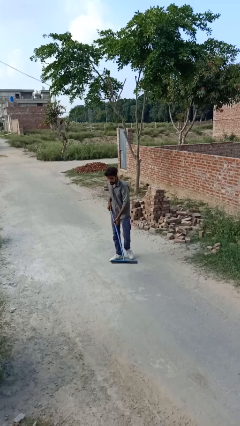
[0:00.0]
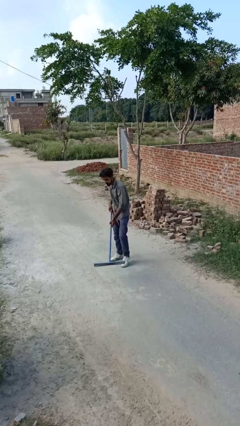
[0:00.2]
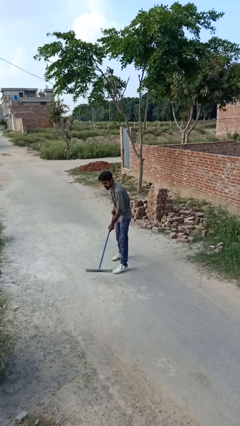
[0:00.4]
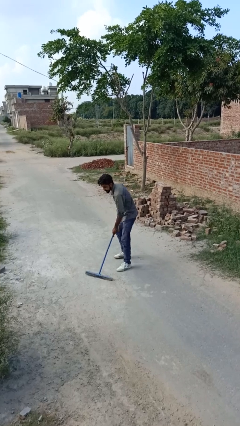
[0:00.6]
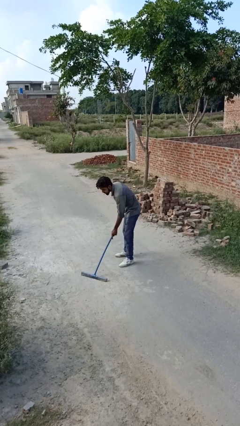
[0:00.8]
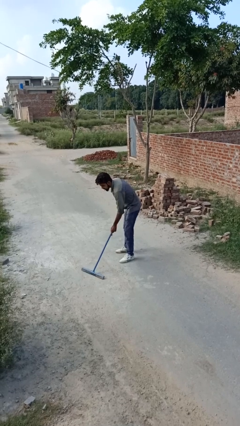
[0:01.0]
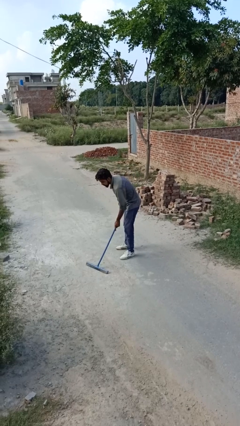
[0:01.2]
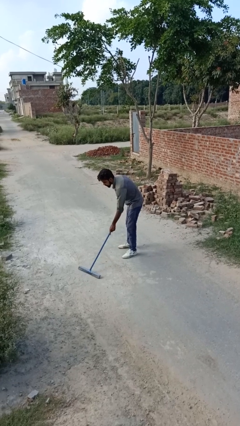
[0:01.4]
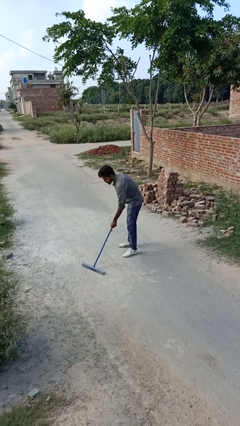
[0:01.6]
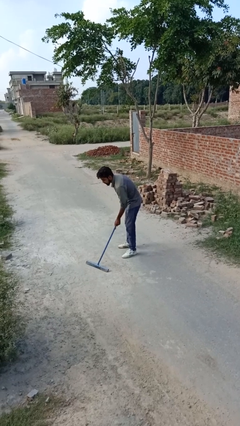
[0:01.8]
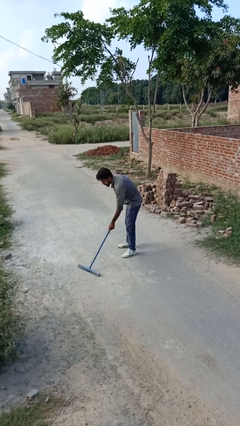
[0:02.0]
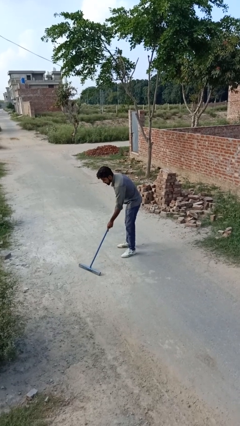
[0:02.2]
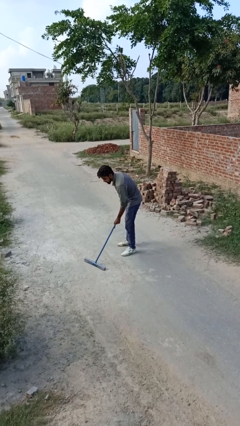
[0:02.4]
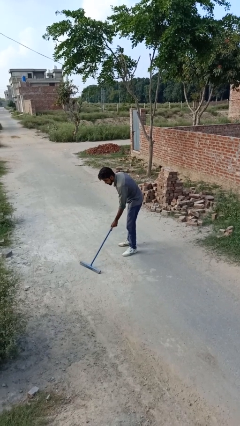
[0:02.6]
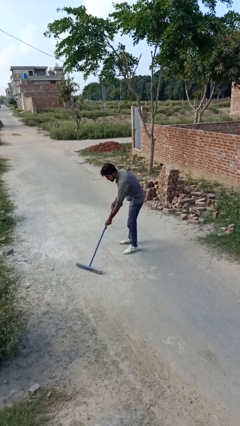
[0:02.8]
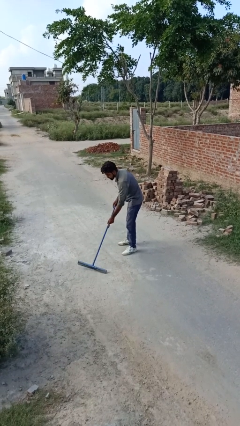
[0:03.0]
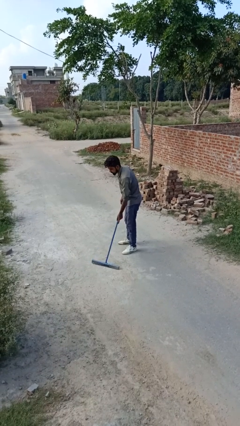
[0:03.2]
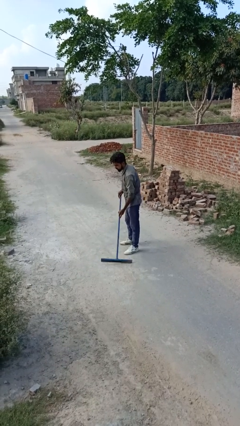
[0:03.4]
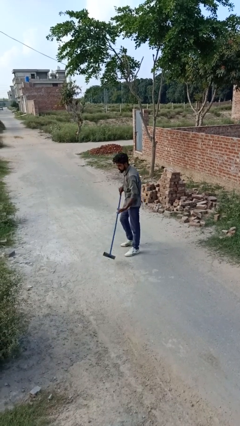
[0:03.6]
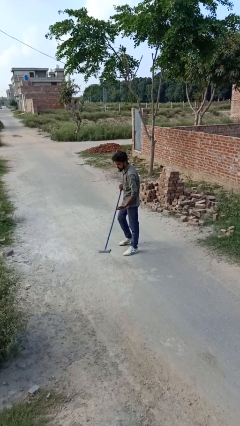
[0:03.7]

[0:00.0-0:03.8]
person sweeps floor

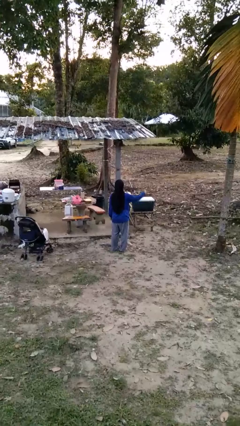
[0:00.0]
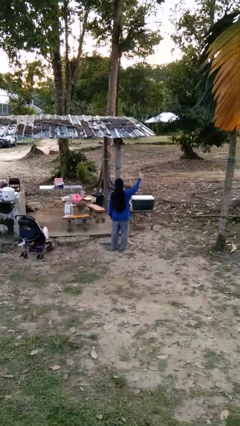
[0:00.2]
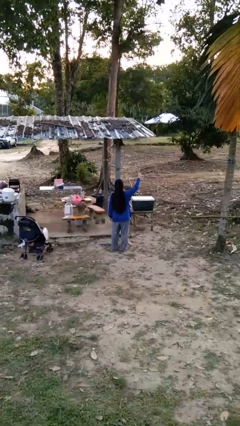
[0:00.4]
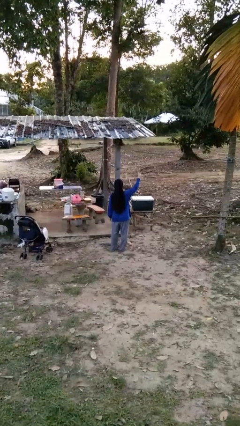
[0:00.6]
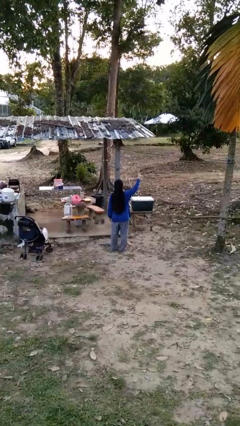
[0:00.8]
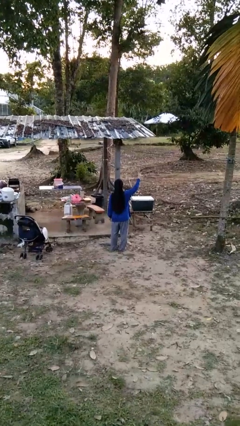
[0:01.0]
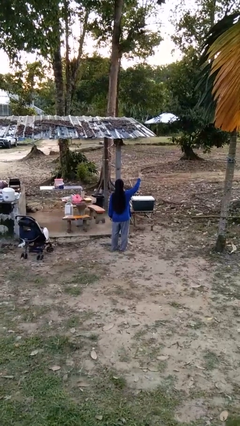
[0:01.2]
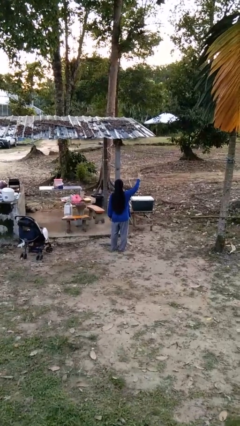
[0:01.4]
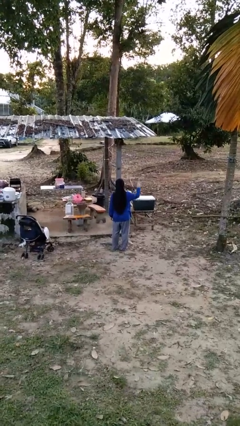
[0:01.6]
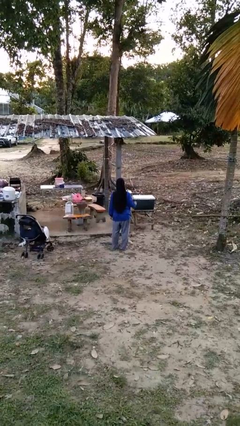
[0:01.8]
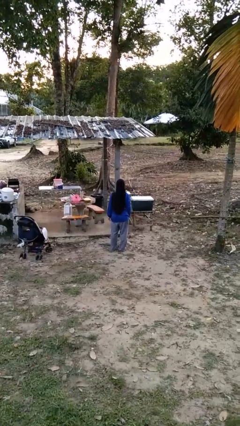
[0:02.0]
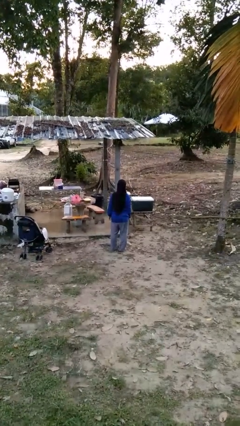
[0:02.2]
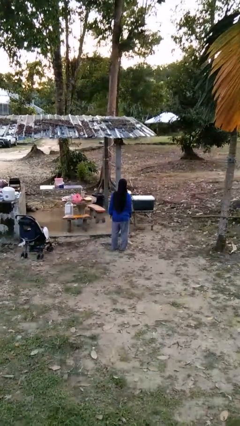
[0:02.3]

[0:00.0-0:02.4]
person gestures number three

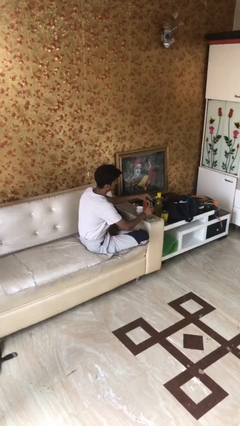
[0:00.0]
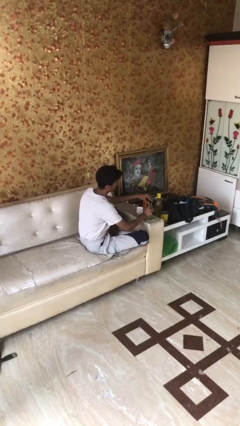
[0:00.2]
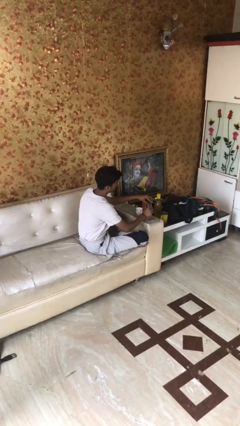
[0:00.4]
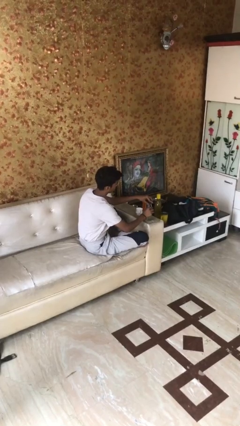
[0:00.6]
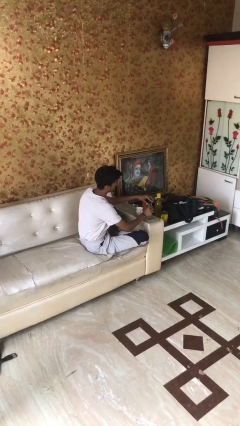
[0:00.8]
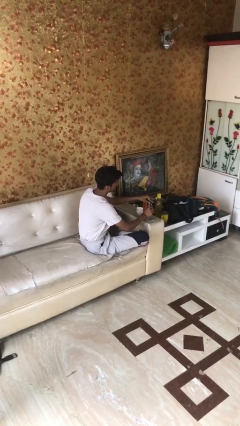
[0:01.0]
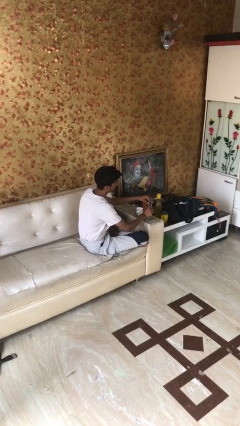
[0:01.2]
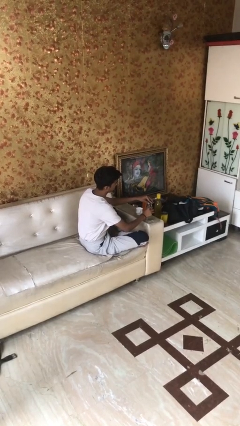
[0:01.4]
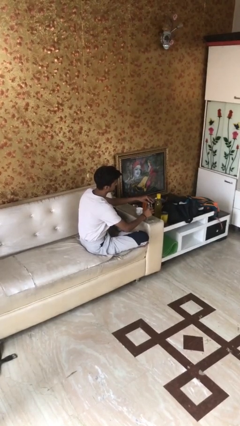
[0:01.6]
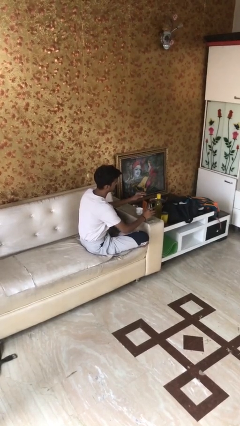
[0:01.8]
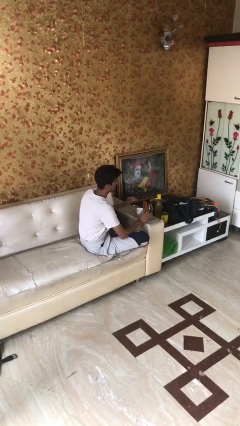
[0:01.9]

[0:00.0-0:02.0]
person screws lid to bottle

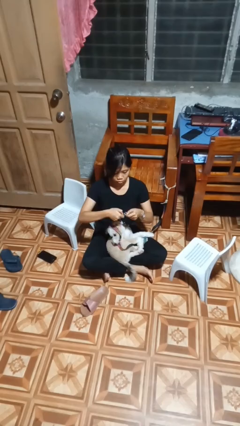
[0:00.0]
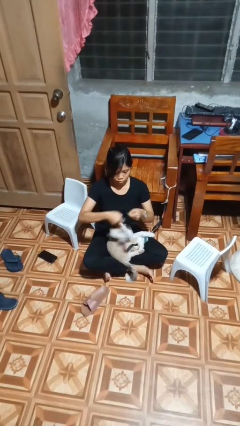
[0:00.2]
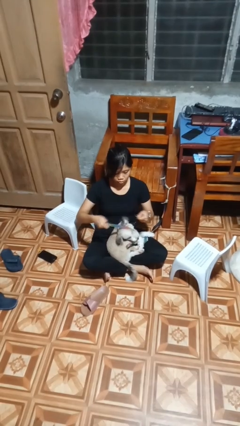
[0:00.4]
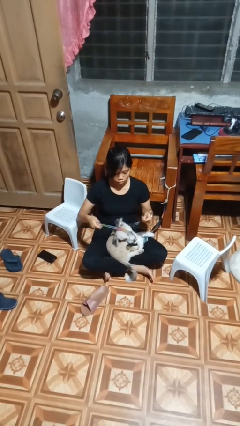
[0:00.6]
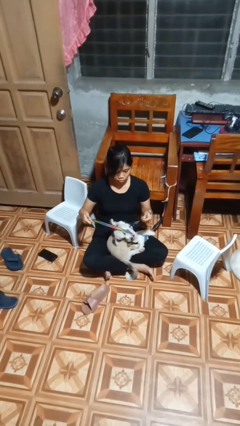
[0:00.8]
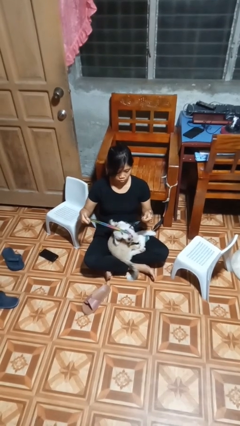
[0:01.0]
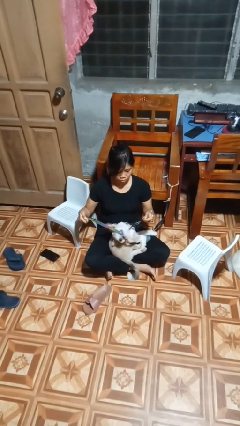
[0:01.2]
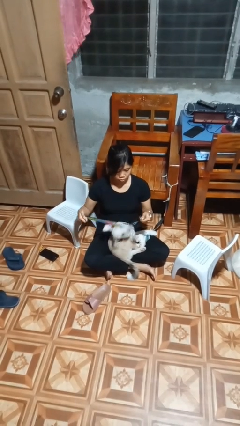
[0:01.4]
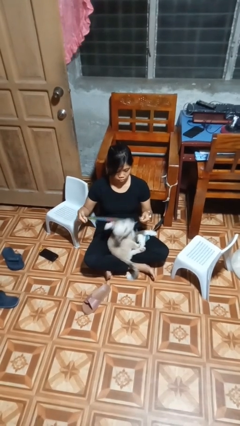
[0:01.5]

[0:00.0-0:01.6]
person unattaches leash from dog

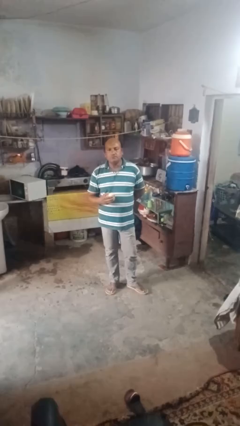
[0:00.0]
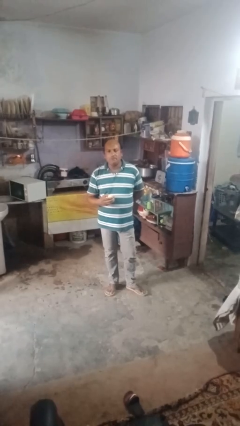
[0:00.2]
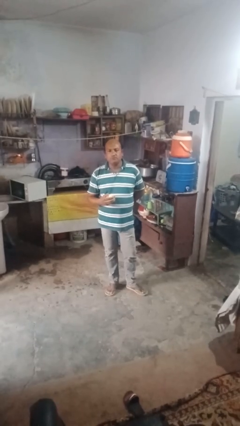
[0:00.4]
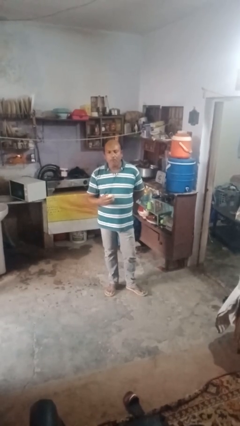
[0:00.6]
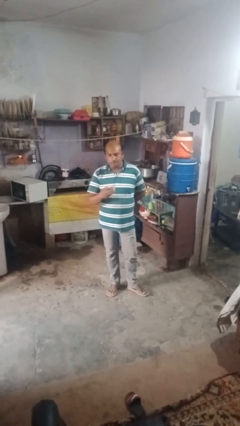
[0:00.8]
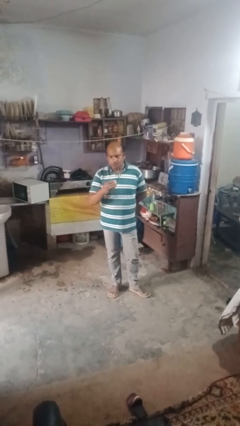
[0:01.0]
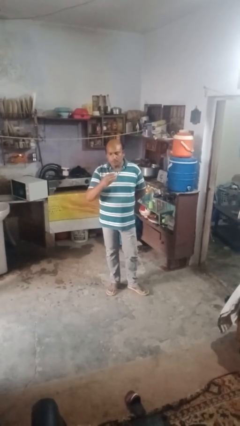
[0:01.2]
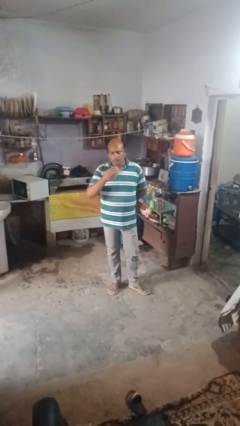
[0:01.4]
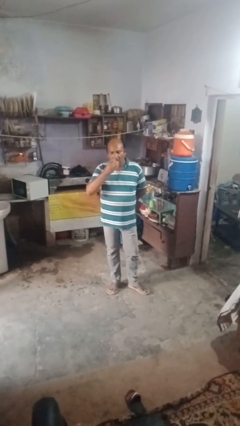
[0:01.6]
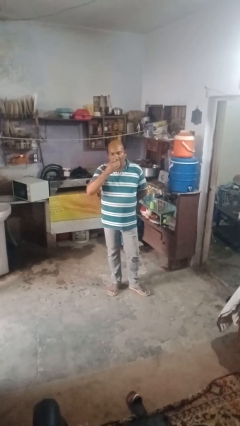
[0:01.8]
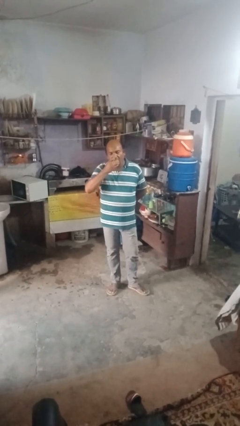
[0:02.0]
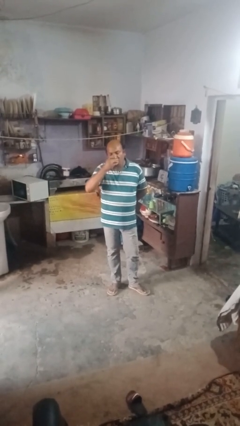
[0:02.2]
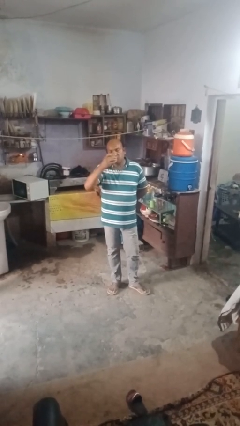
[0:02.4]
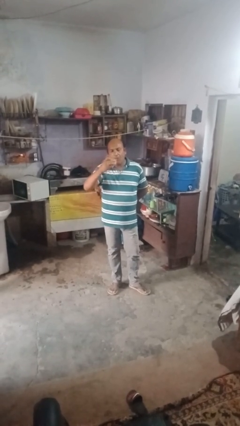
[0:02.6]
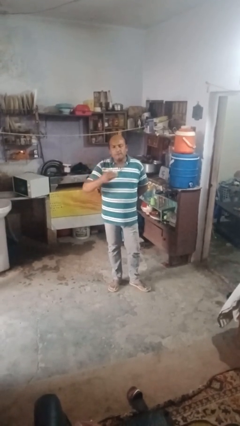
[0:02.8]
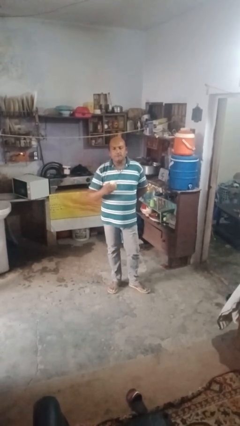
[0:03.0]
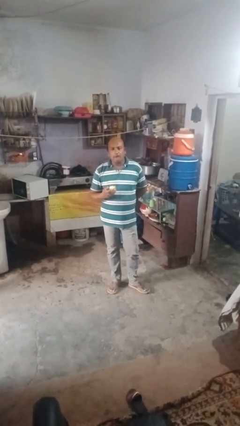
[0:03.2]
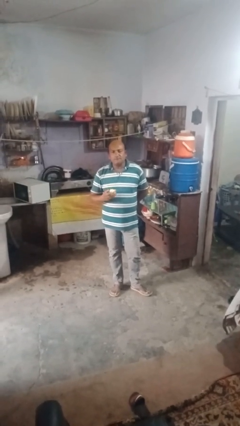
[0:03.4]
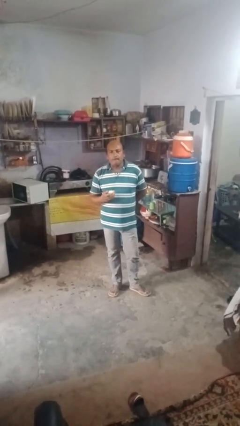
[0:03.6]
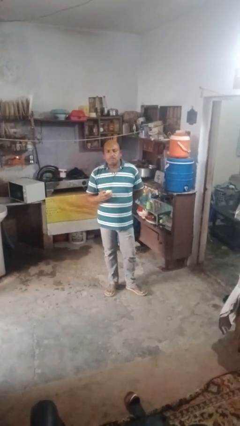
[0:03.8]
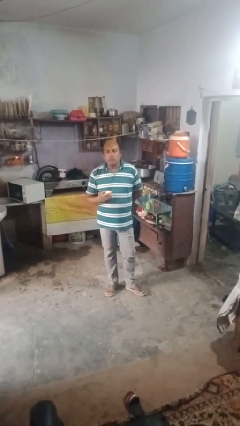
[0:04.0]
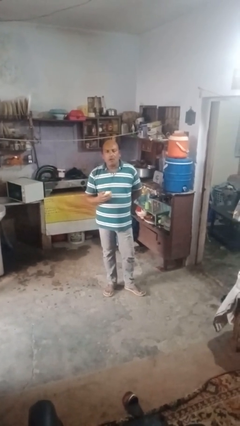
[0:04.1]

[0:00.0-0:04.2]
person eats apple

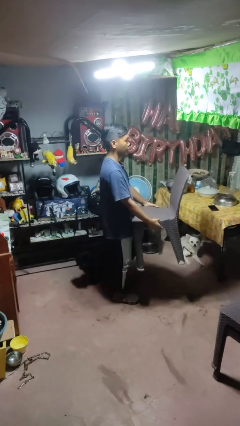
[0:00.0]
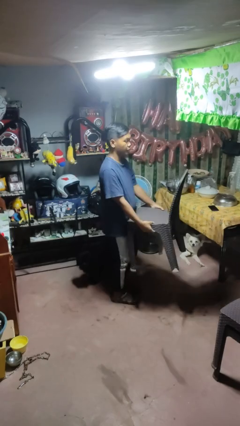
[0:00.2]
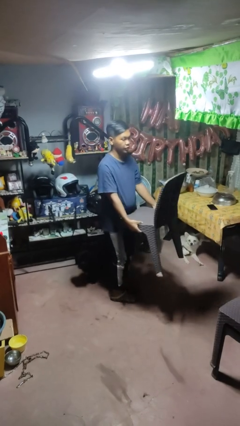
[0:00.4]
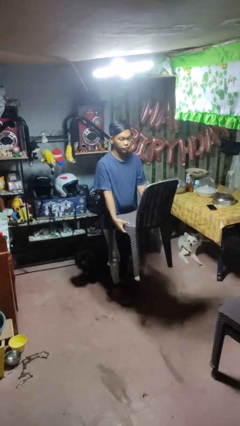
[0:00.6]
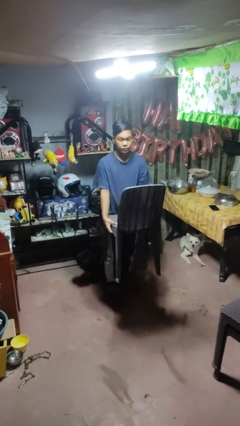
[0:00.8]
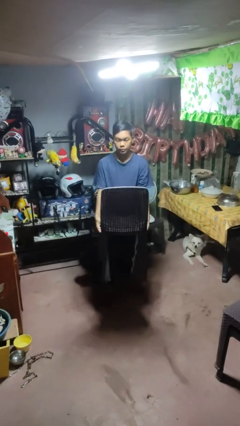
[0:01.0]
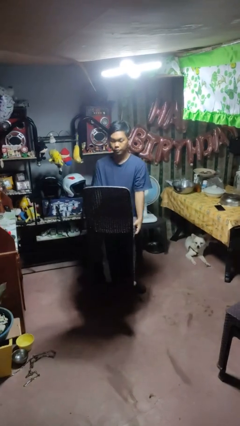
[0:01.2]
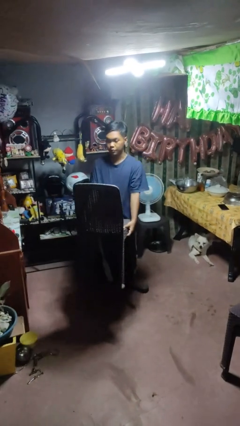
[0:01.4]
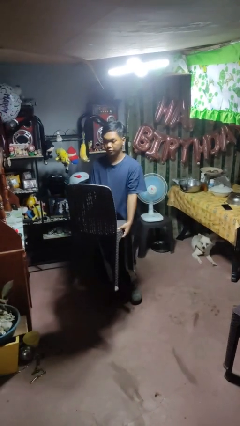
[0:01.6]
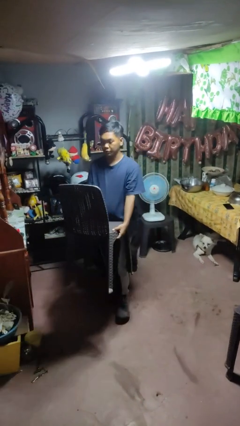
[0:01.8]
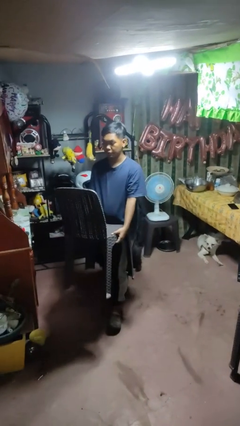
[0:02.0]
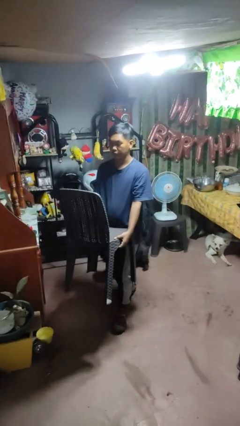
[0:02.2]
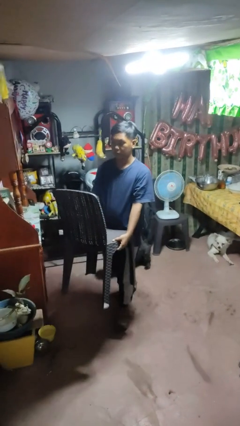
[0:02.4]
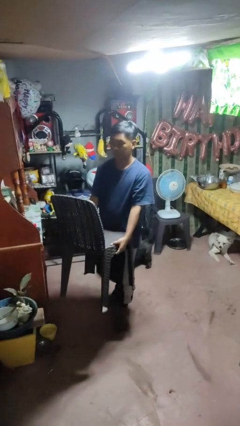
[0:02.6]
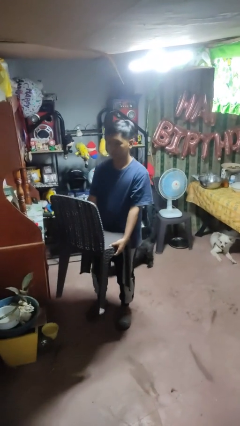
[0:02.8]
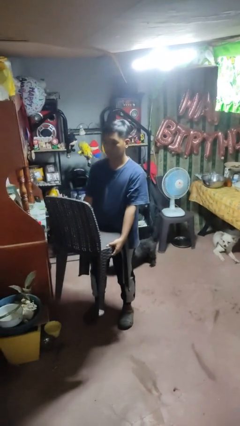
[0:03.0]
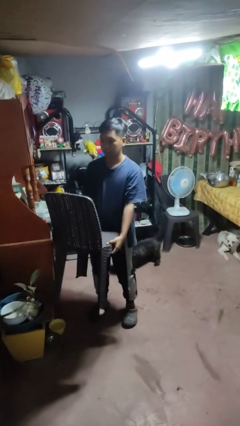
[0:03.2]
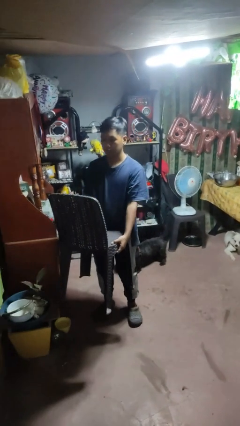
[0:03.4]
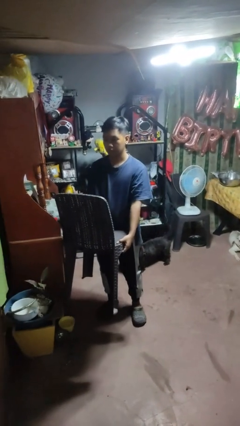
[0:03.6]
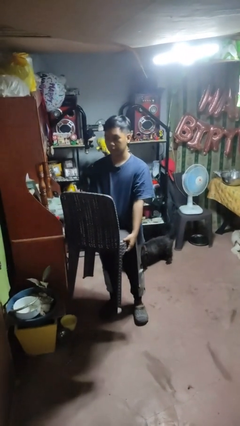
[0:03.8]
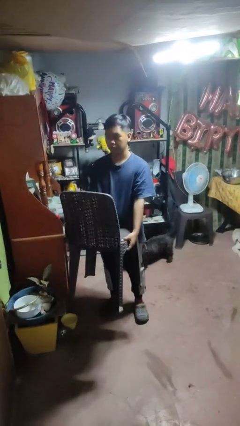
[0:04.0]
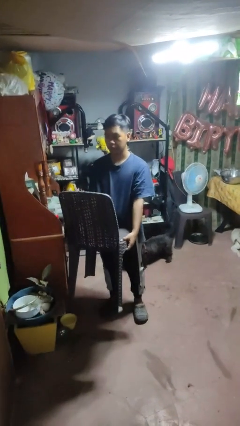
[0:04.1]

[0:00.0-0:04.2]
person carries furniture
